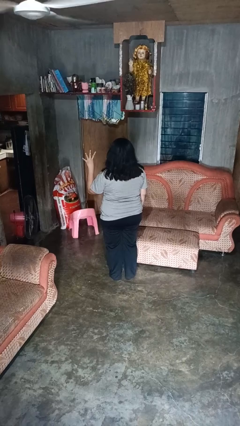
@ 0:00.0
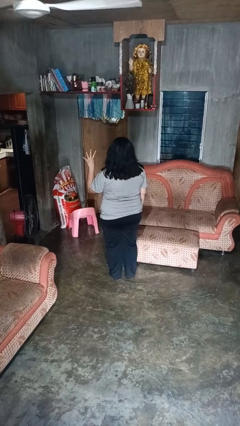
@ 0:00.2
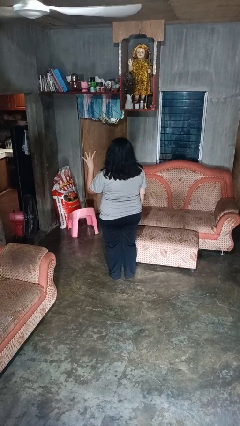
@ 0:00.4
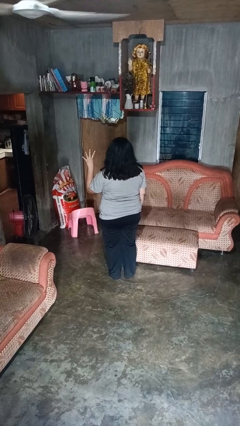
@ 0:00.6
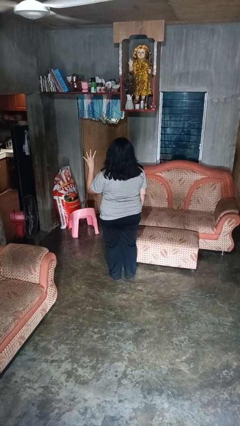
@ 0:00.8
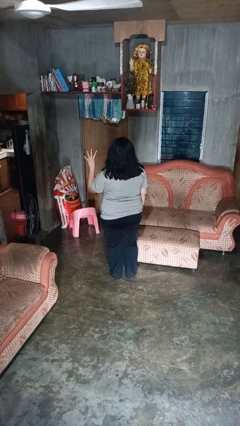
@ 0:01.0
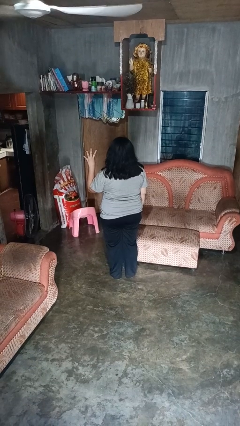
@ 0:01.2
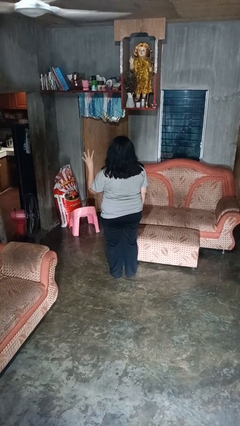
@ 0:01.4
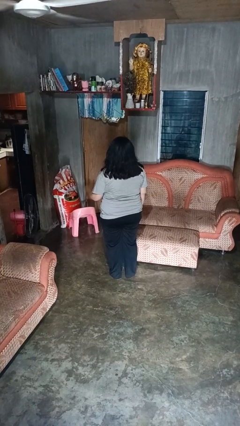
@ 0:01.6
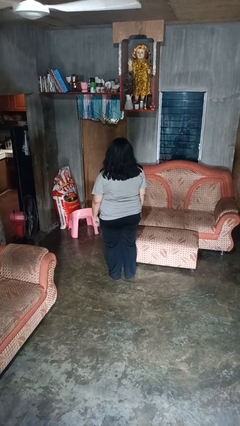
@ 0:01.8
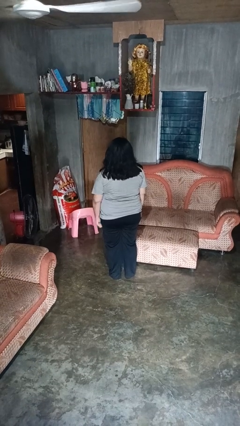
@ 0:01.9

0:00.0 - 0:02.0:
person gestures number four

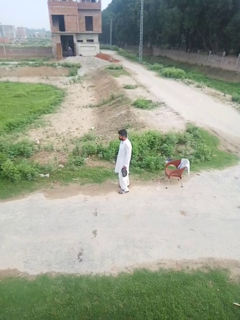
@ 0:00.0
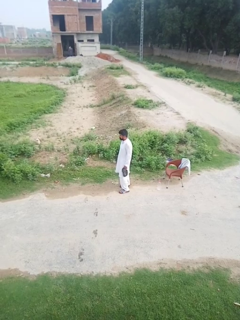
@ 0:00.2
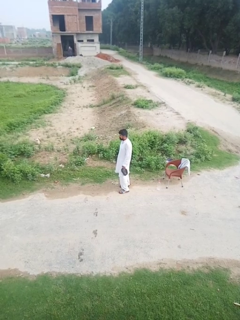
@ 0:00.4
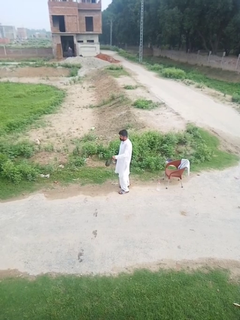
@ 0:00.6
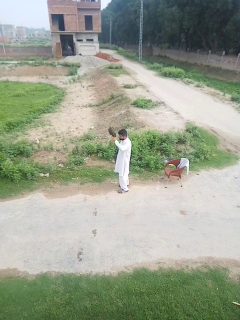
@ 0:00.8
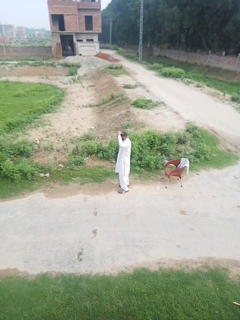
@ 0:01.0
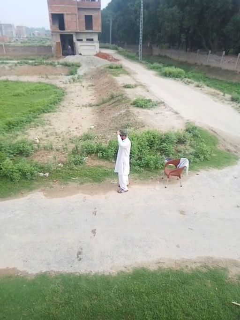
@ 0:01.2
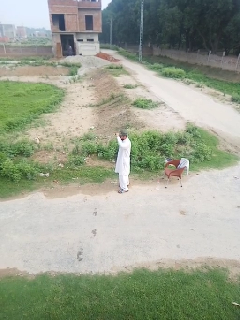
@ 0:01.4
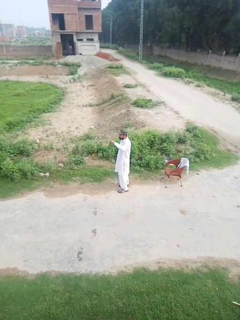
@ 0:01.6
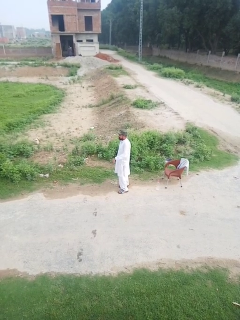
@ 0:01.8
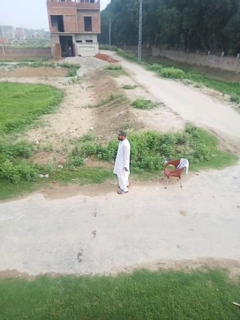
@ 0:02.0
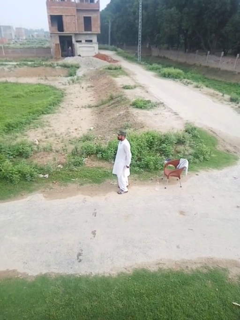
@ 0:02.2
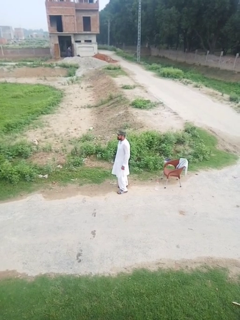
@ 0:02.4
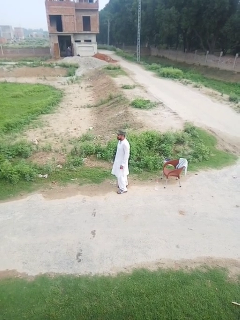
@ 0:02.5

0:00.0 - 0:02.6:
person puts on hat

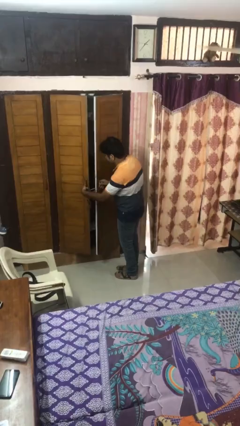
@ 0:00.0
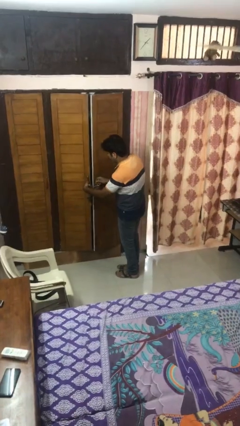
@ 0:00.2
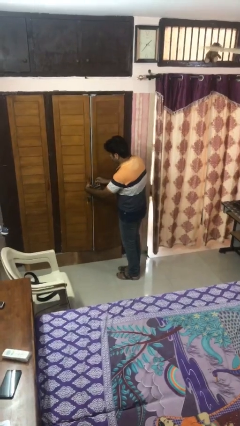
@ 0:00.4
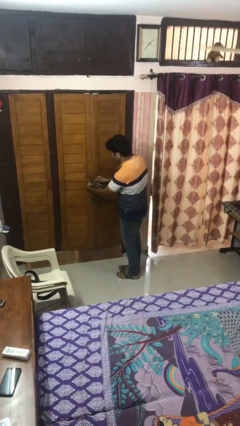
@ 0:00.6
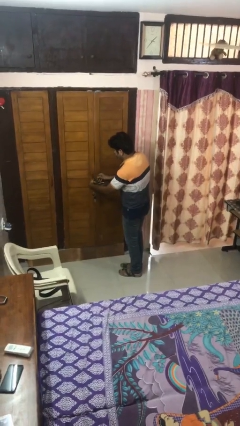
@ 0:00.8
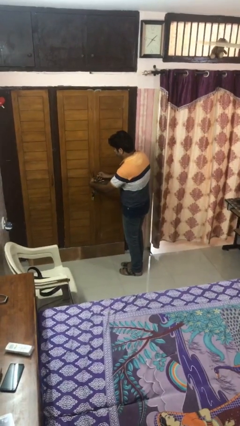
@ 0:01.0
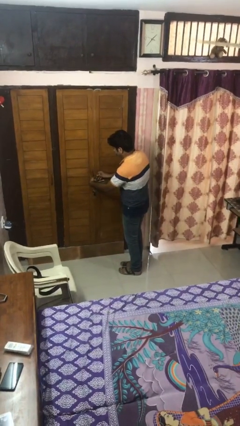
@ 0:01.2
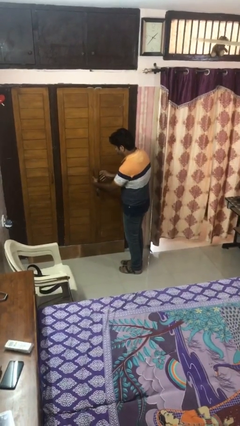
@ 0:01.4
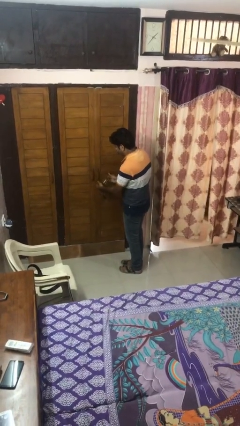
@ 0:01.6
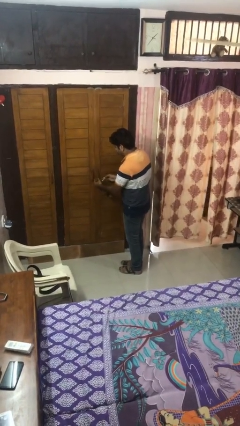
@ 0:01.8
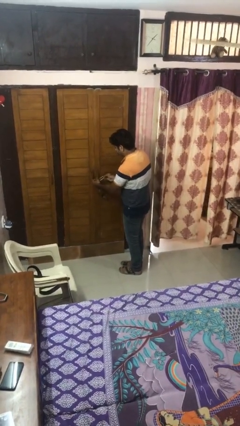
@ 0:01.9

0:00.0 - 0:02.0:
person closes facility door

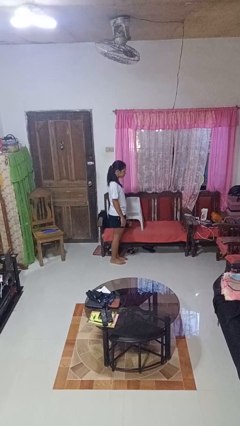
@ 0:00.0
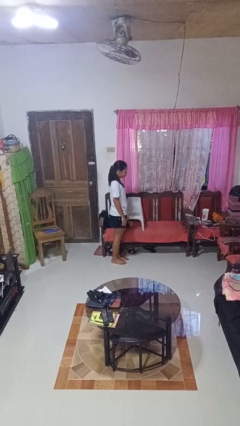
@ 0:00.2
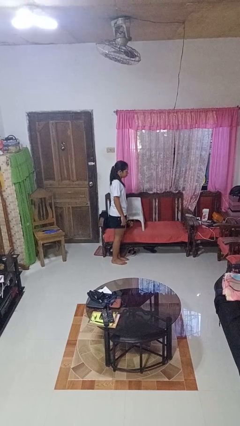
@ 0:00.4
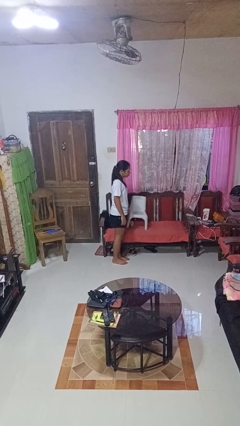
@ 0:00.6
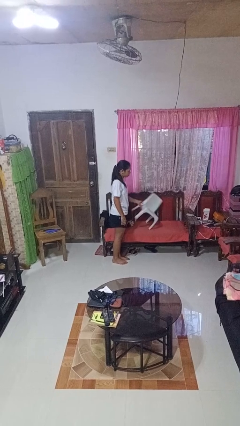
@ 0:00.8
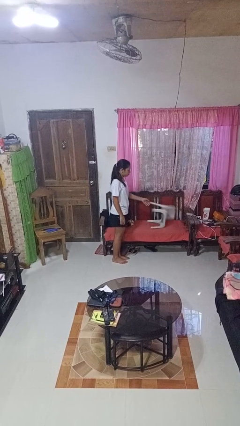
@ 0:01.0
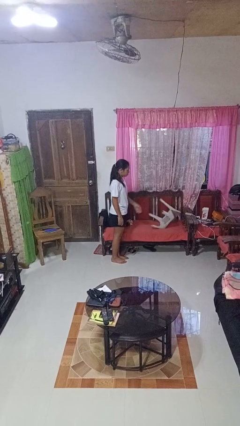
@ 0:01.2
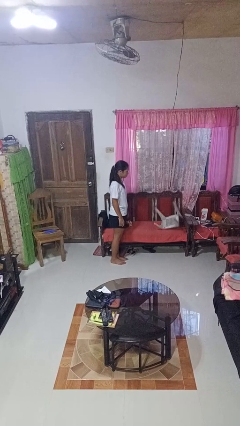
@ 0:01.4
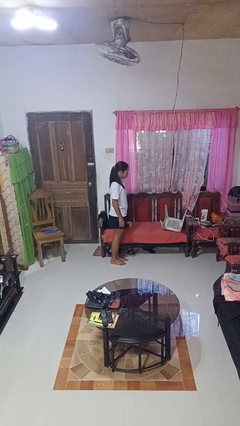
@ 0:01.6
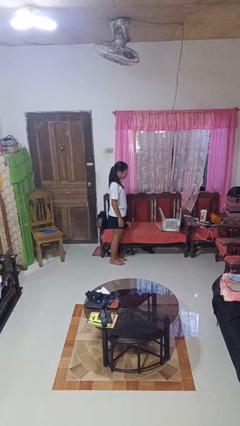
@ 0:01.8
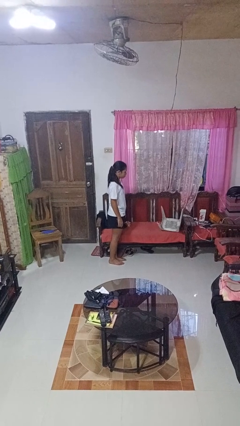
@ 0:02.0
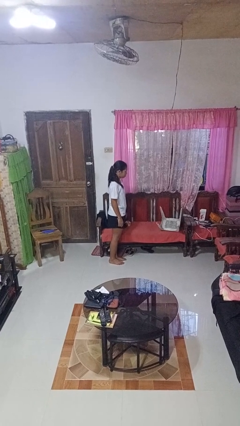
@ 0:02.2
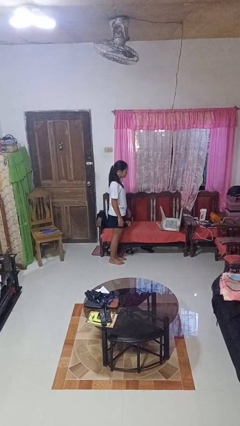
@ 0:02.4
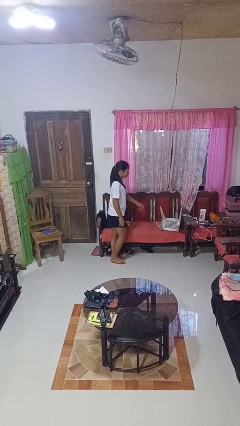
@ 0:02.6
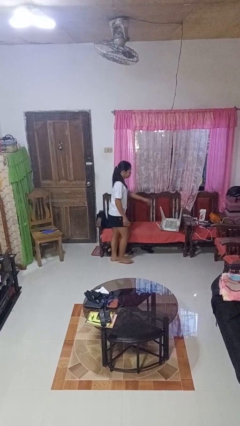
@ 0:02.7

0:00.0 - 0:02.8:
person knocks over furniture

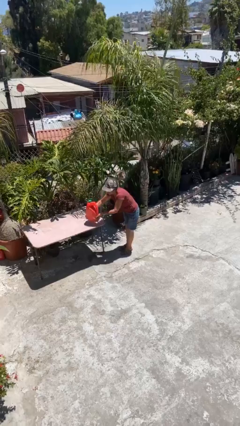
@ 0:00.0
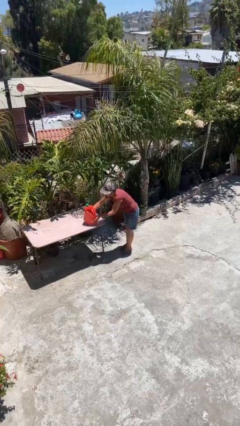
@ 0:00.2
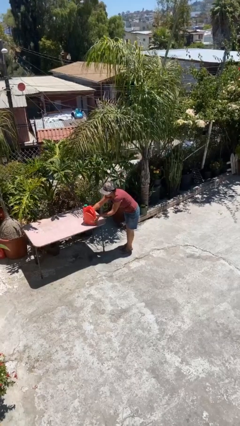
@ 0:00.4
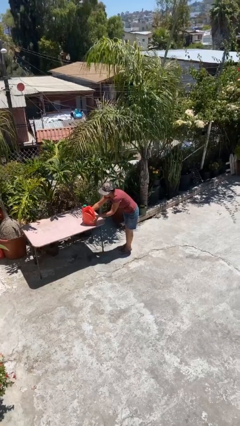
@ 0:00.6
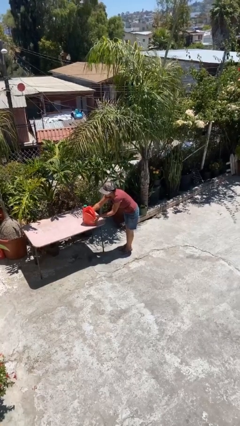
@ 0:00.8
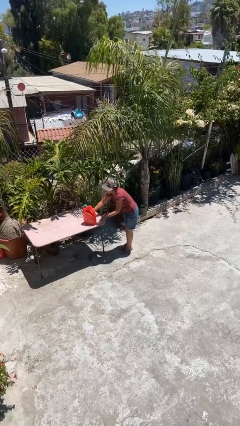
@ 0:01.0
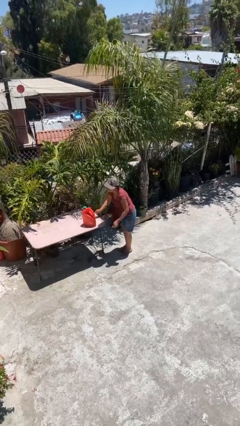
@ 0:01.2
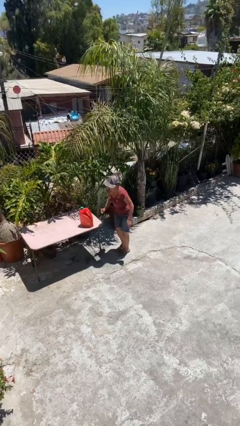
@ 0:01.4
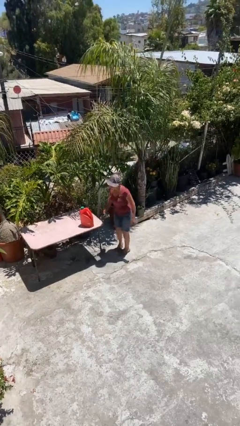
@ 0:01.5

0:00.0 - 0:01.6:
person puts down object on table

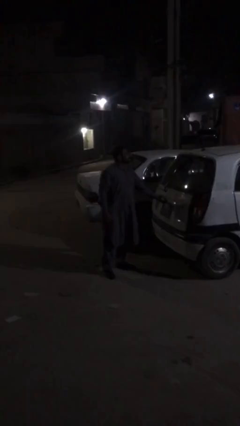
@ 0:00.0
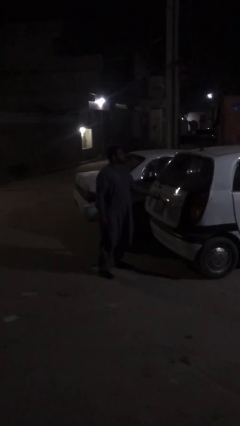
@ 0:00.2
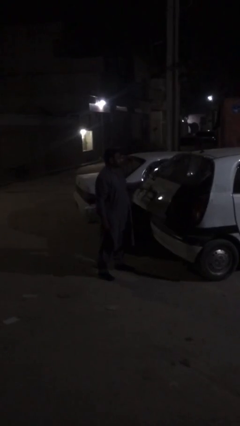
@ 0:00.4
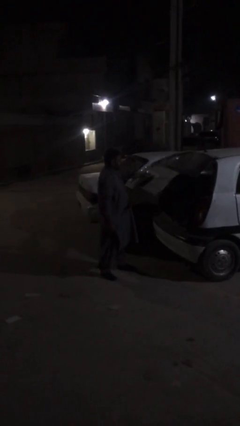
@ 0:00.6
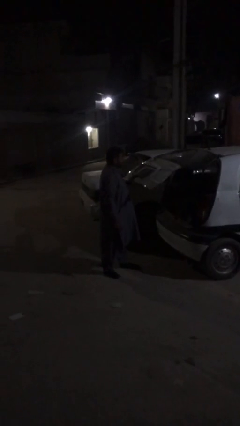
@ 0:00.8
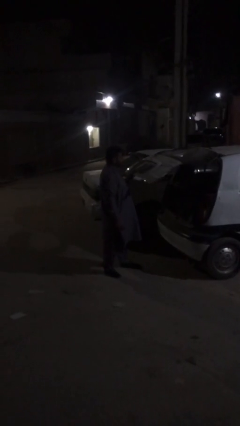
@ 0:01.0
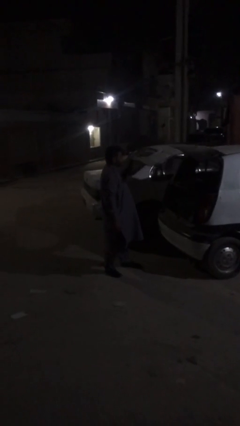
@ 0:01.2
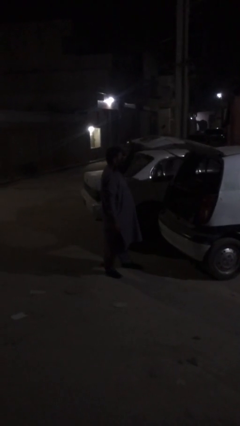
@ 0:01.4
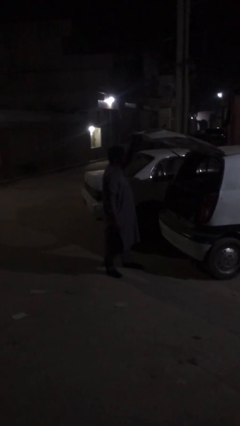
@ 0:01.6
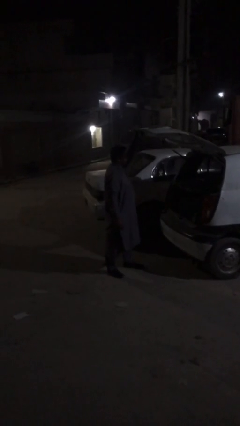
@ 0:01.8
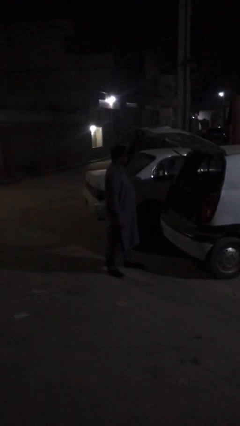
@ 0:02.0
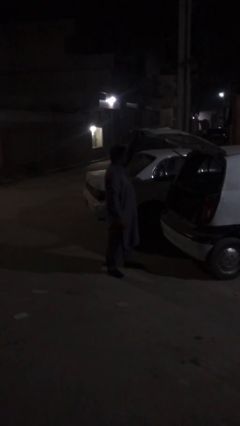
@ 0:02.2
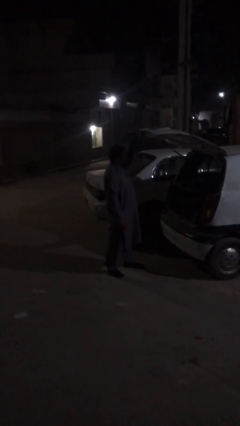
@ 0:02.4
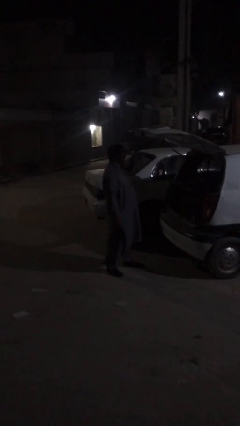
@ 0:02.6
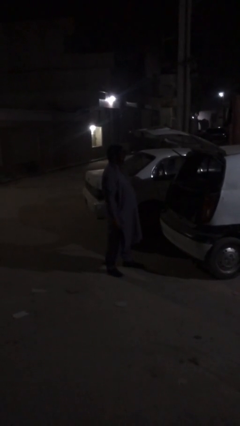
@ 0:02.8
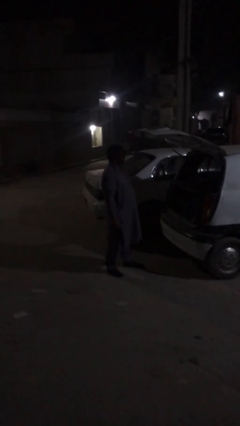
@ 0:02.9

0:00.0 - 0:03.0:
person opens car trunk

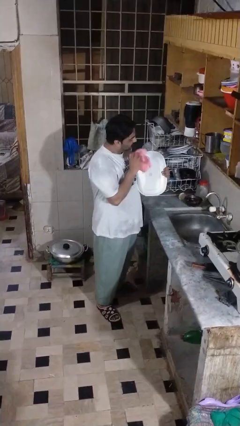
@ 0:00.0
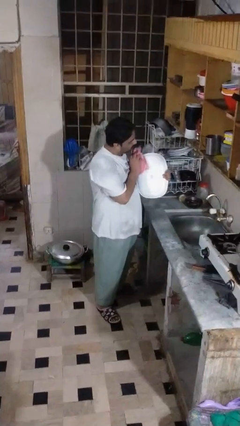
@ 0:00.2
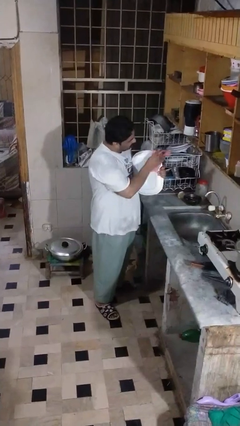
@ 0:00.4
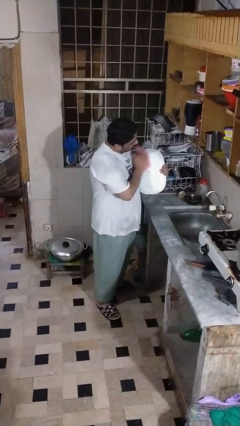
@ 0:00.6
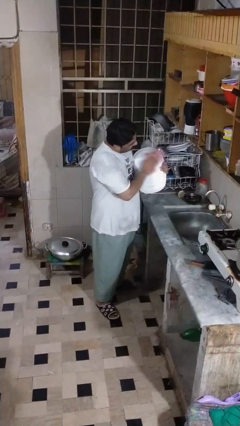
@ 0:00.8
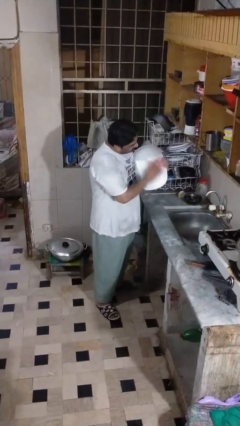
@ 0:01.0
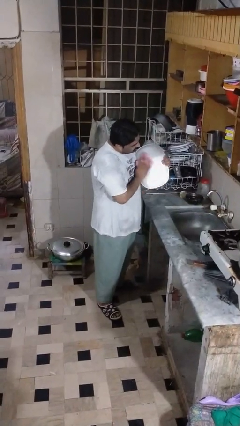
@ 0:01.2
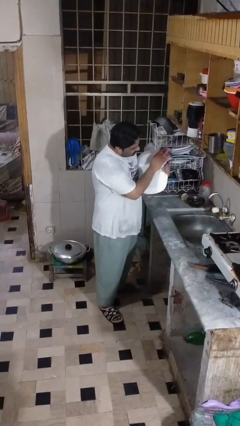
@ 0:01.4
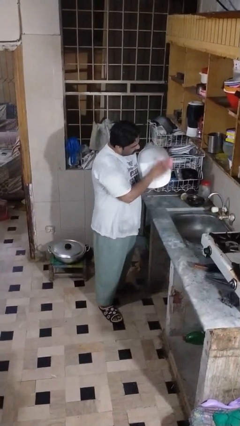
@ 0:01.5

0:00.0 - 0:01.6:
person dries dish

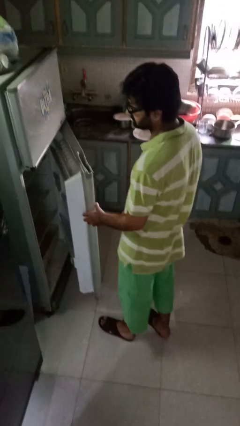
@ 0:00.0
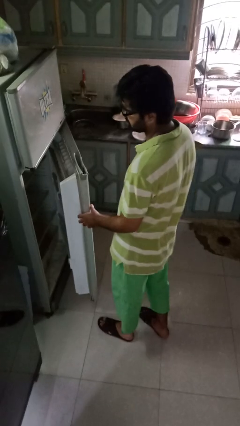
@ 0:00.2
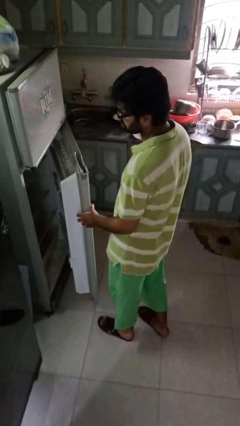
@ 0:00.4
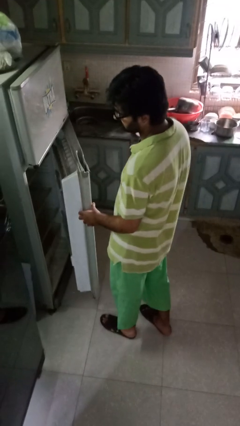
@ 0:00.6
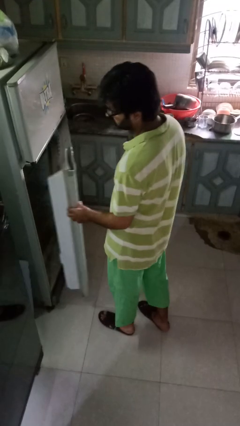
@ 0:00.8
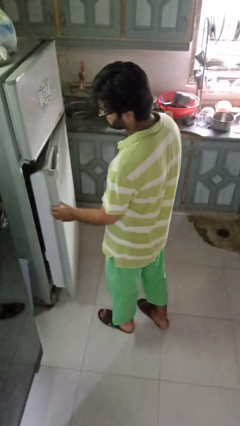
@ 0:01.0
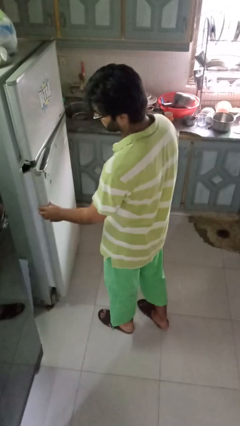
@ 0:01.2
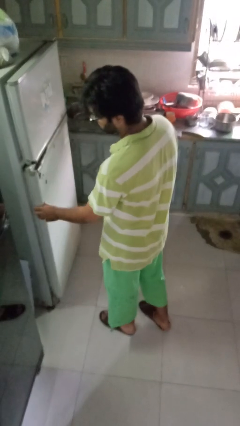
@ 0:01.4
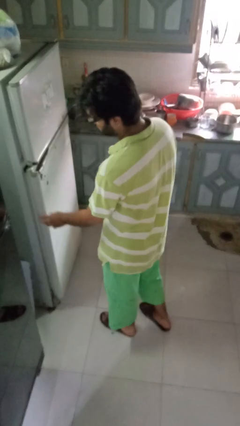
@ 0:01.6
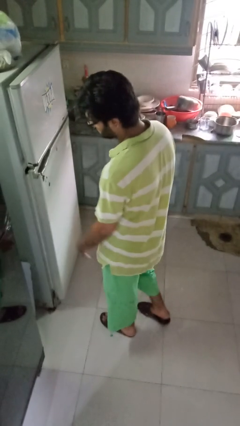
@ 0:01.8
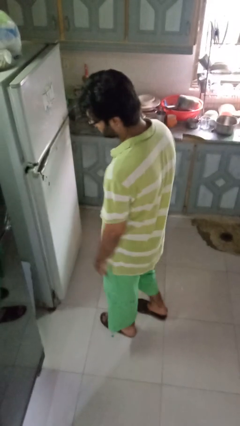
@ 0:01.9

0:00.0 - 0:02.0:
person closes refrigerator
